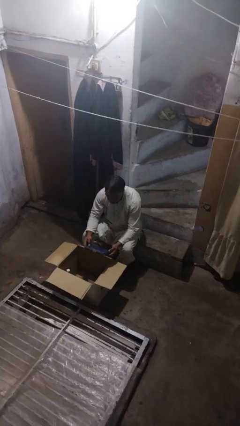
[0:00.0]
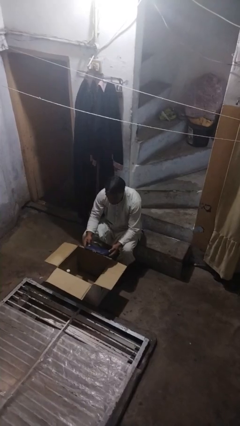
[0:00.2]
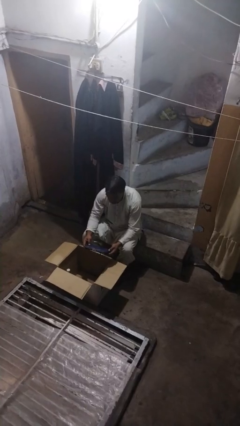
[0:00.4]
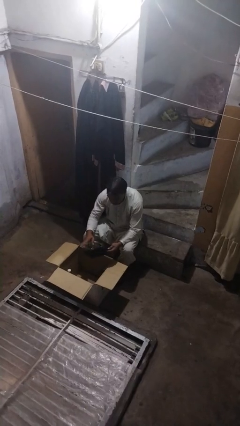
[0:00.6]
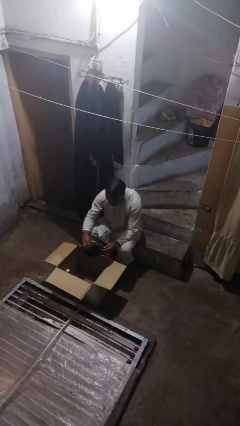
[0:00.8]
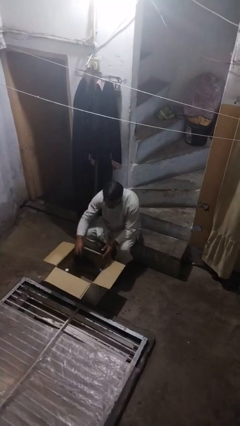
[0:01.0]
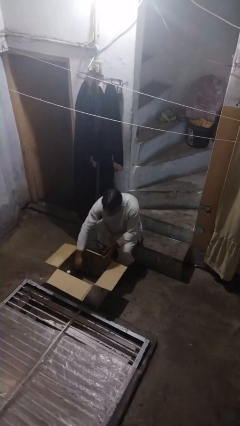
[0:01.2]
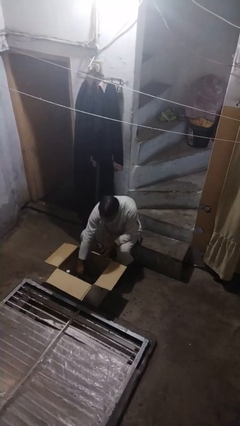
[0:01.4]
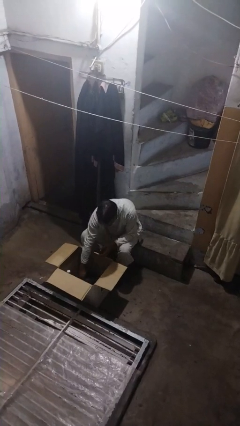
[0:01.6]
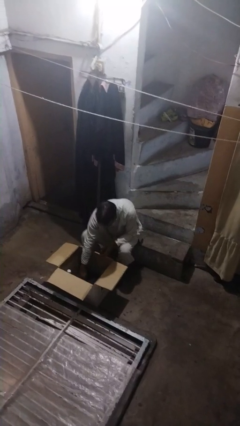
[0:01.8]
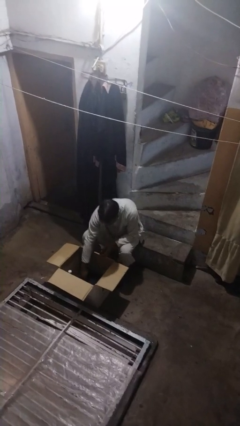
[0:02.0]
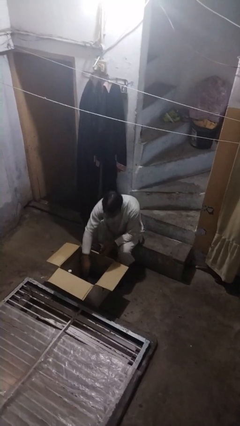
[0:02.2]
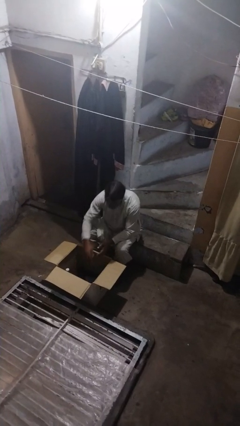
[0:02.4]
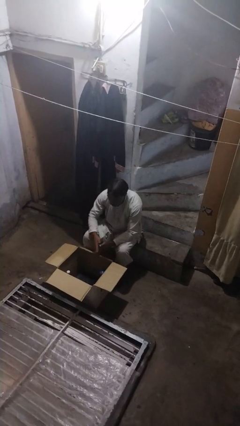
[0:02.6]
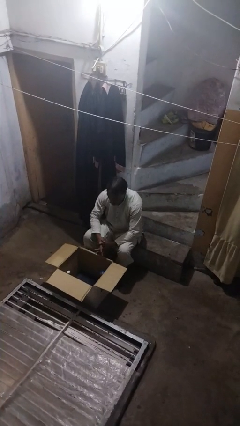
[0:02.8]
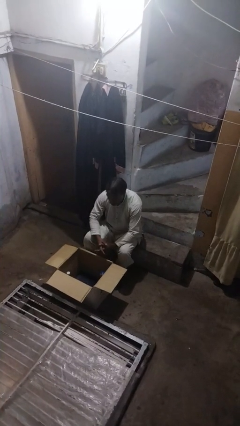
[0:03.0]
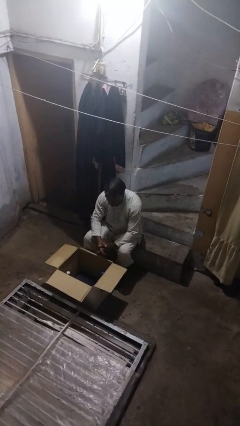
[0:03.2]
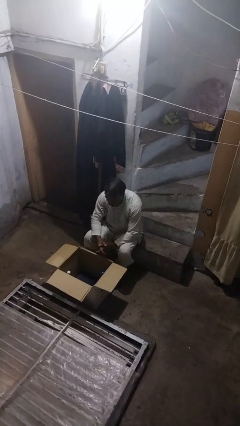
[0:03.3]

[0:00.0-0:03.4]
person puts object into box

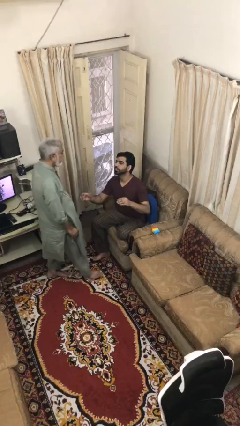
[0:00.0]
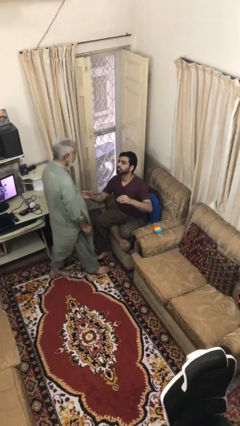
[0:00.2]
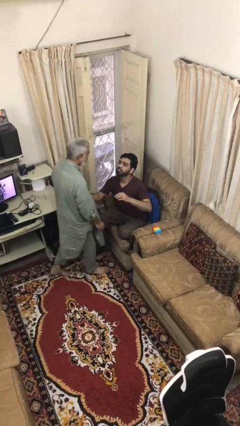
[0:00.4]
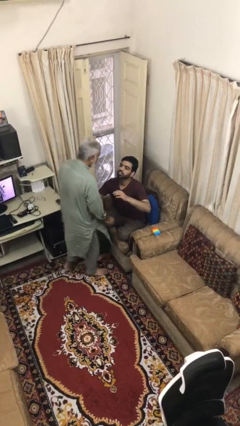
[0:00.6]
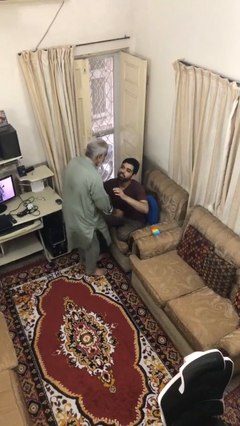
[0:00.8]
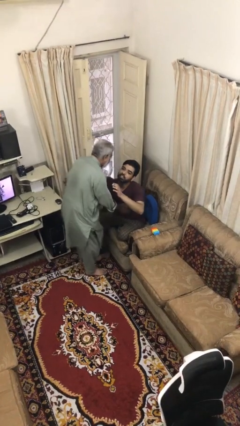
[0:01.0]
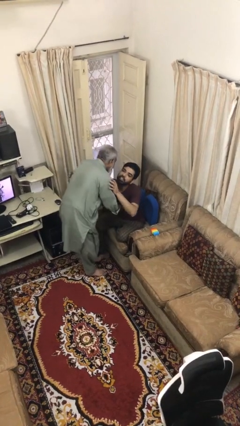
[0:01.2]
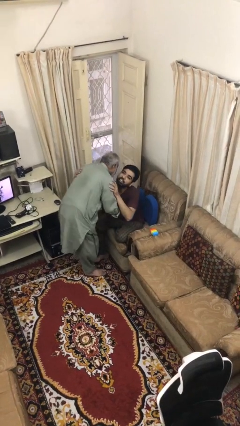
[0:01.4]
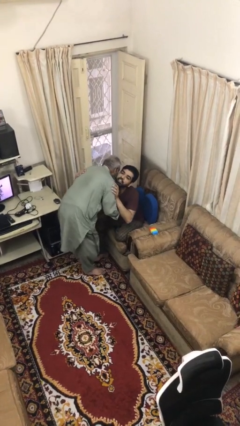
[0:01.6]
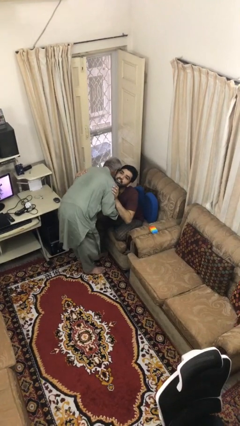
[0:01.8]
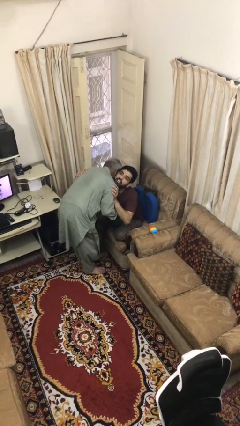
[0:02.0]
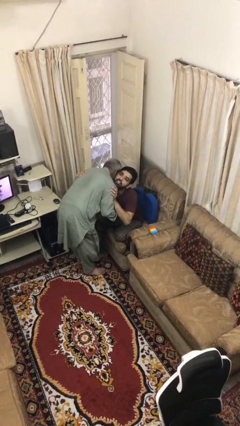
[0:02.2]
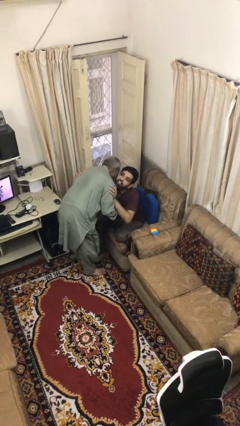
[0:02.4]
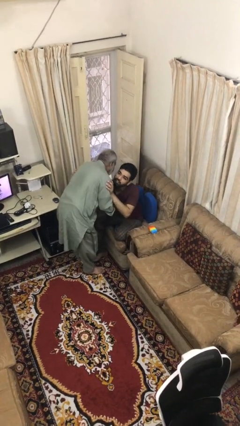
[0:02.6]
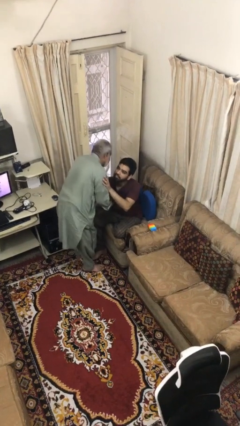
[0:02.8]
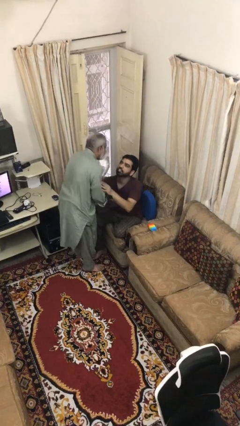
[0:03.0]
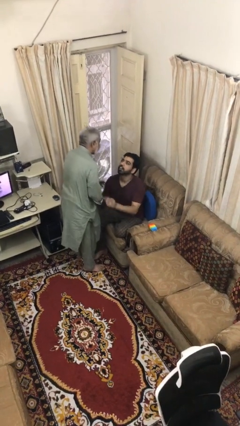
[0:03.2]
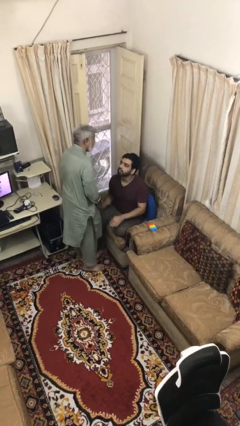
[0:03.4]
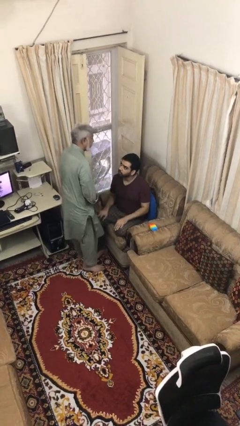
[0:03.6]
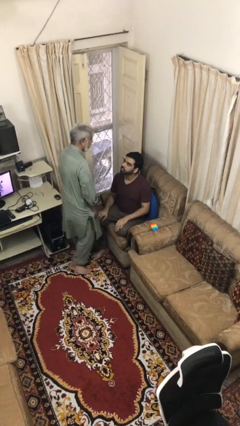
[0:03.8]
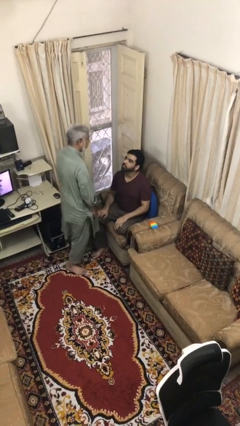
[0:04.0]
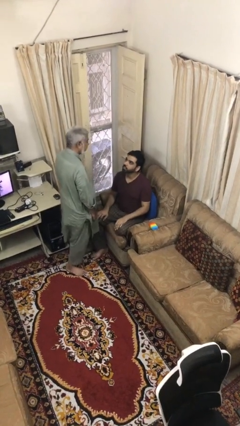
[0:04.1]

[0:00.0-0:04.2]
person embraces person

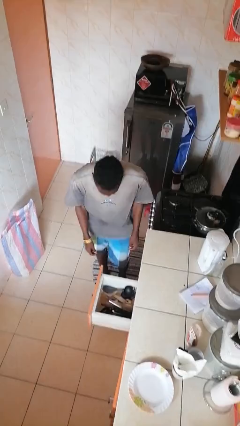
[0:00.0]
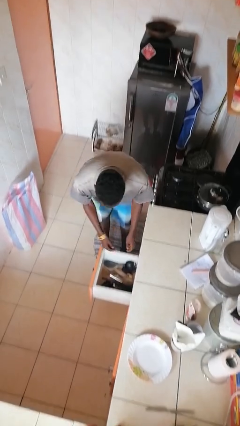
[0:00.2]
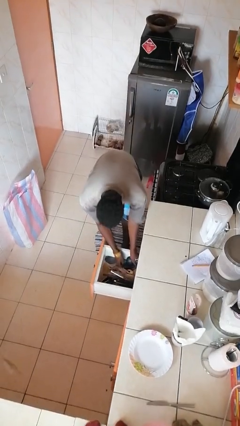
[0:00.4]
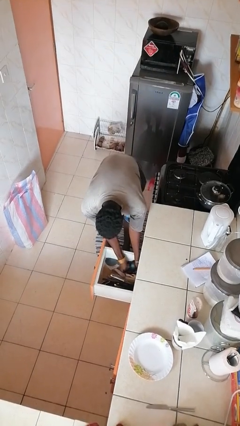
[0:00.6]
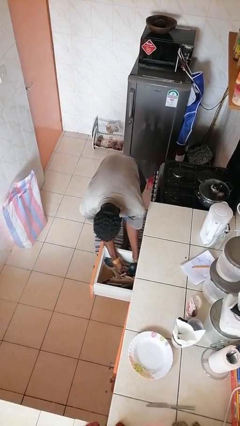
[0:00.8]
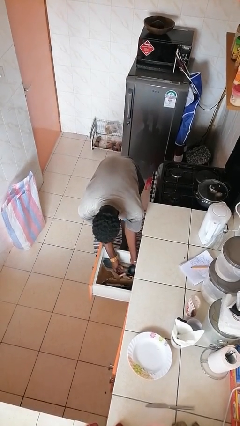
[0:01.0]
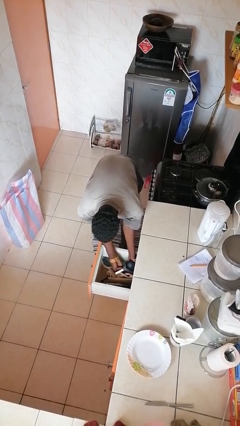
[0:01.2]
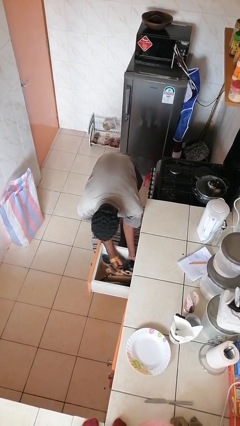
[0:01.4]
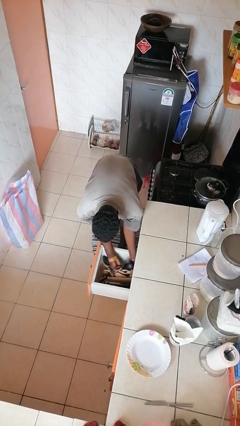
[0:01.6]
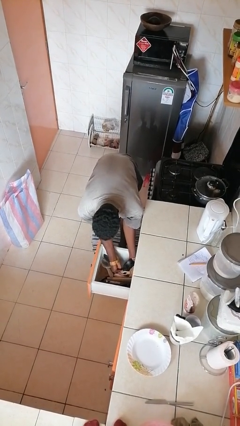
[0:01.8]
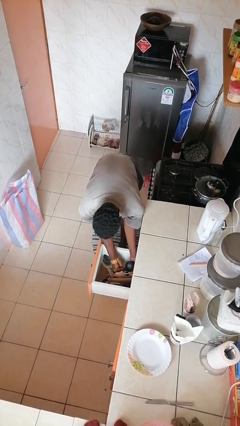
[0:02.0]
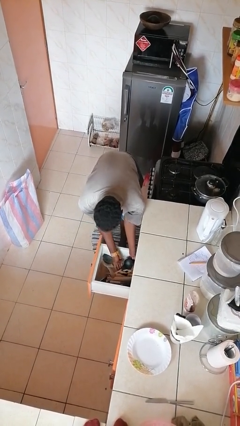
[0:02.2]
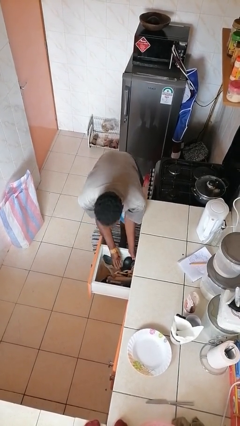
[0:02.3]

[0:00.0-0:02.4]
person searches in kitchen drawer

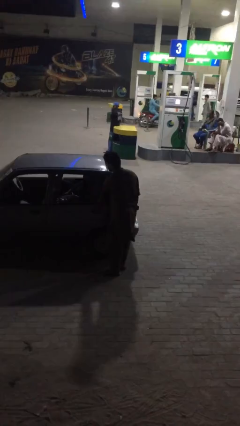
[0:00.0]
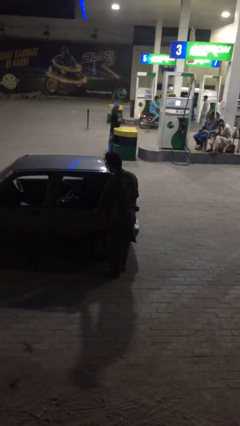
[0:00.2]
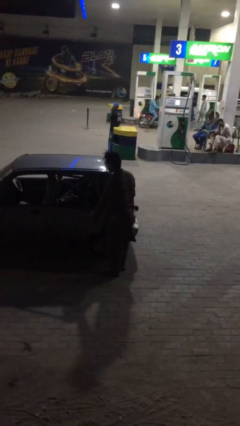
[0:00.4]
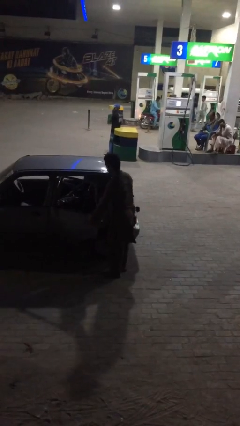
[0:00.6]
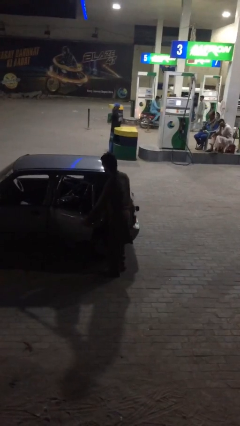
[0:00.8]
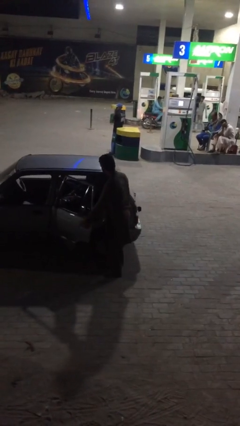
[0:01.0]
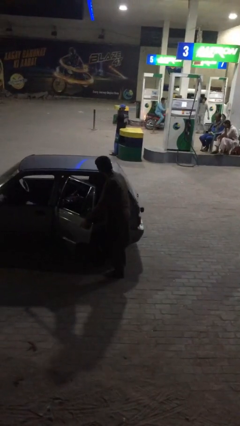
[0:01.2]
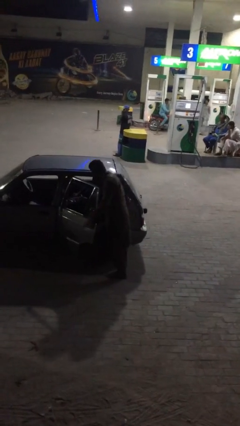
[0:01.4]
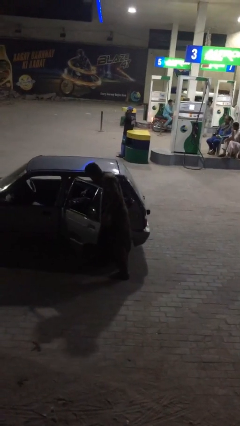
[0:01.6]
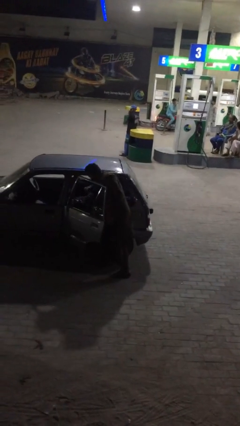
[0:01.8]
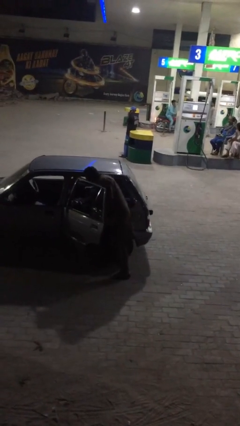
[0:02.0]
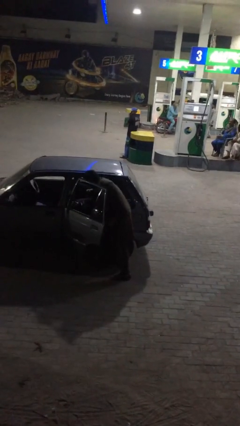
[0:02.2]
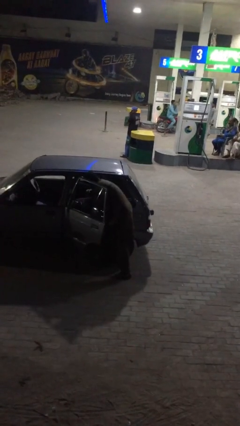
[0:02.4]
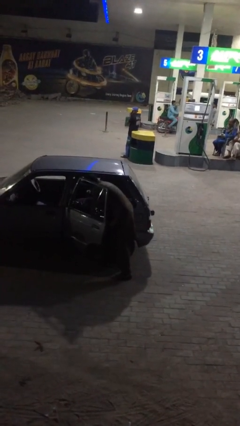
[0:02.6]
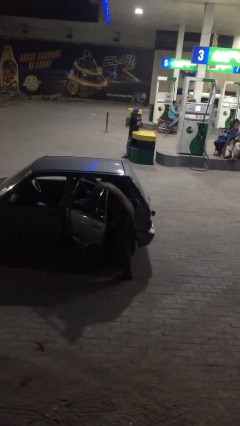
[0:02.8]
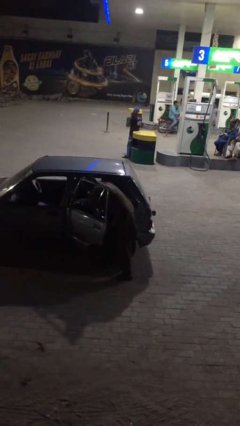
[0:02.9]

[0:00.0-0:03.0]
person opens car door

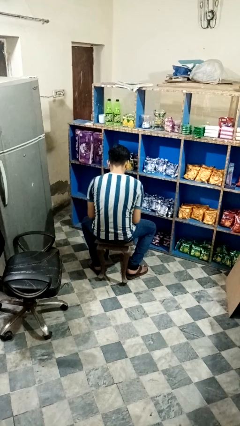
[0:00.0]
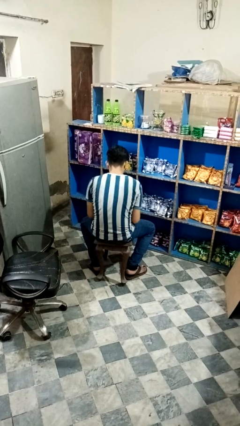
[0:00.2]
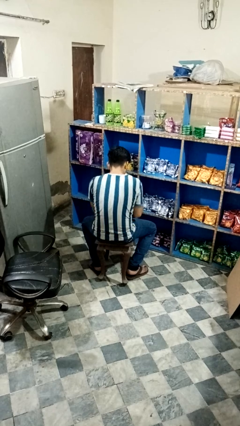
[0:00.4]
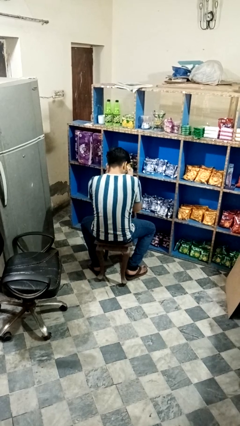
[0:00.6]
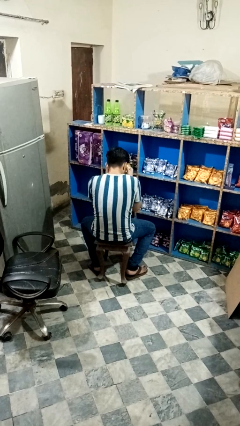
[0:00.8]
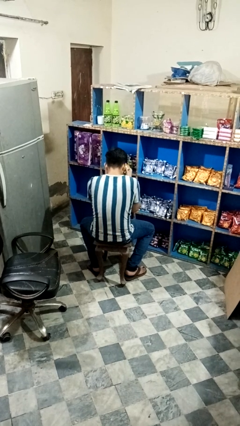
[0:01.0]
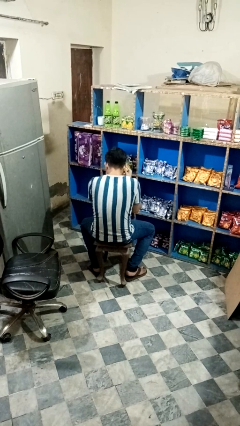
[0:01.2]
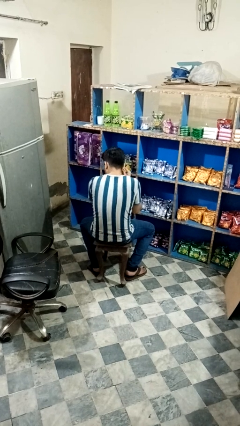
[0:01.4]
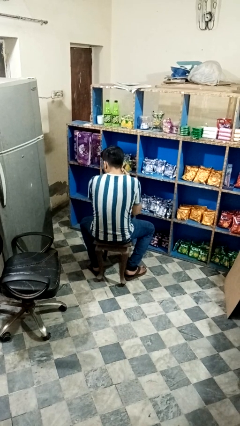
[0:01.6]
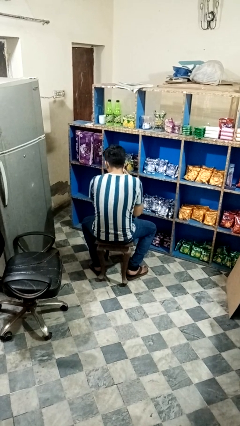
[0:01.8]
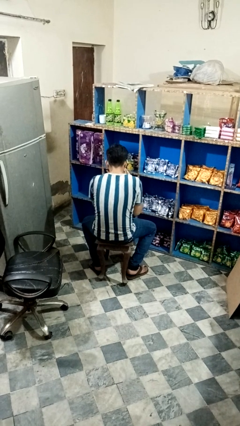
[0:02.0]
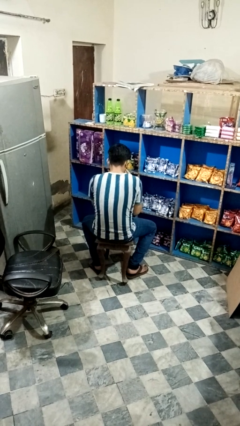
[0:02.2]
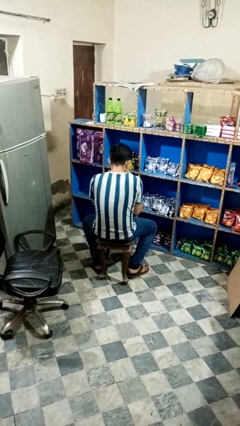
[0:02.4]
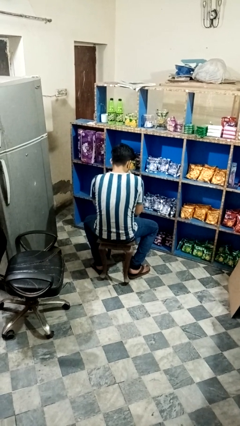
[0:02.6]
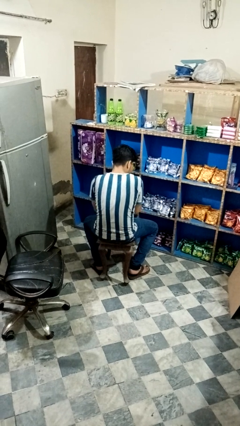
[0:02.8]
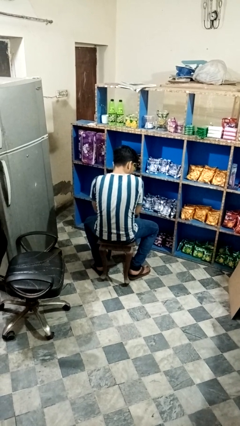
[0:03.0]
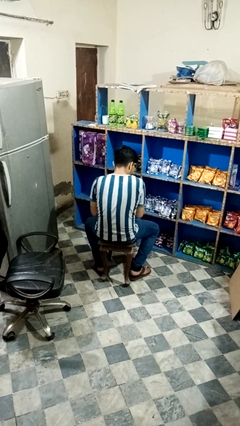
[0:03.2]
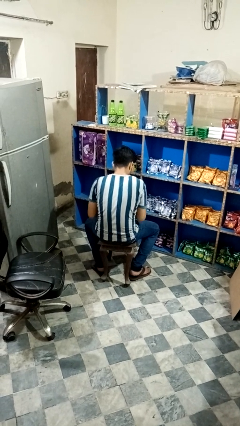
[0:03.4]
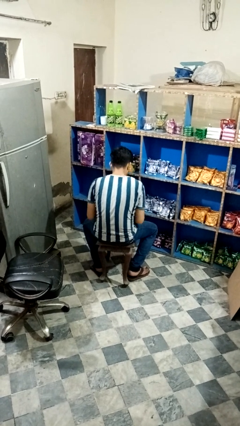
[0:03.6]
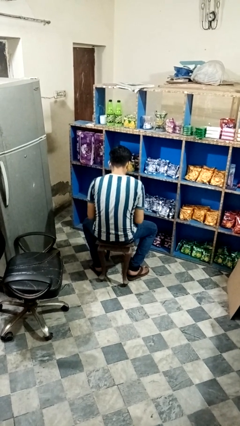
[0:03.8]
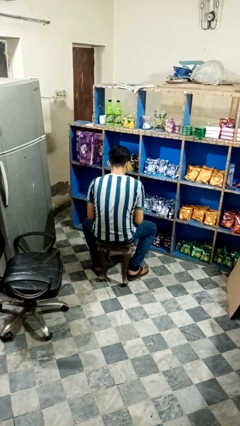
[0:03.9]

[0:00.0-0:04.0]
person wipes mouth with napkin

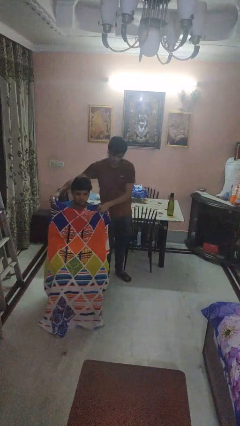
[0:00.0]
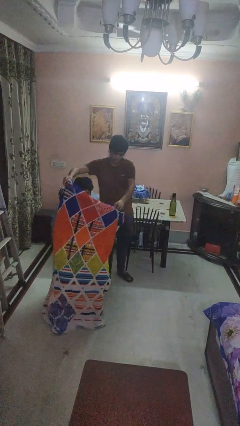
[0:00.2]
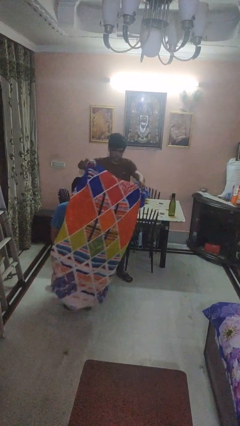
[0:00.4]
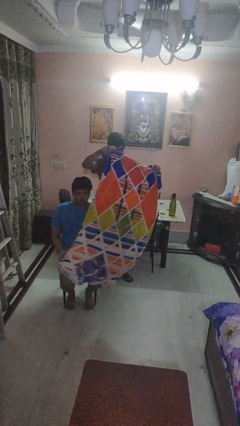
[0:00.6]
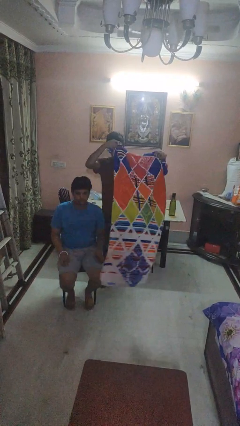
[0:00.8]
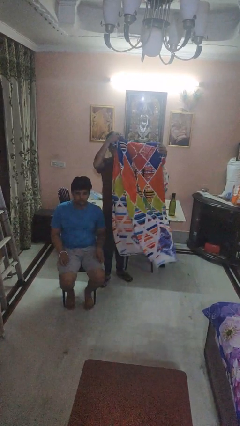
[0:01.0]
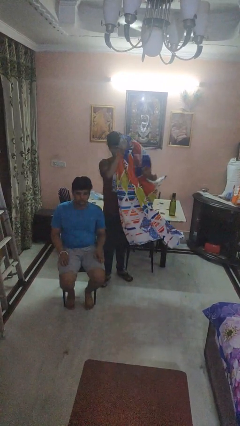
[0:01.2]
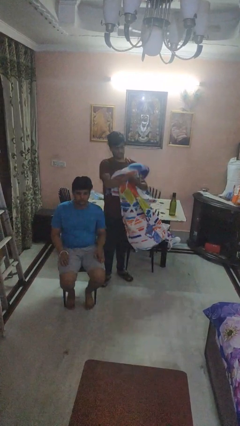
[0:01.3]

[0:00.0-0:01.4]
person uncovers friend with blanket
